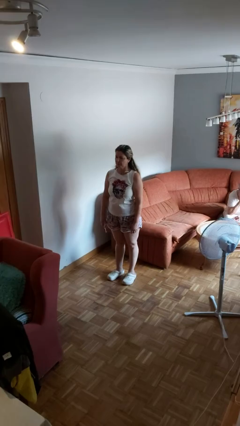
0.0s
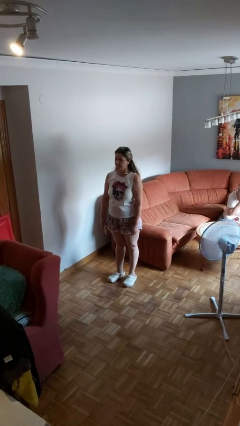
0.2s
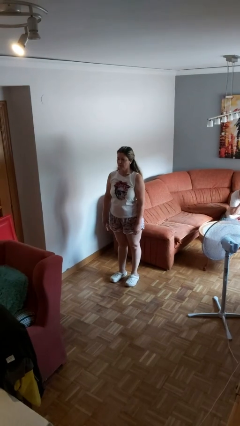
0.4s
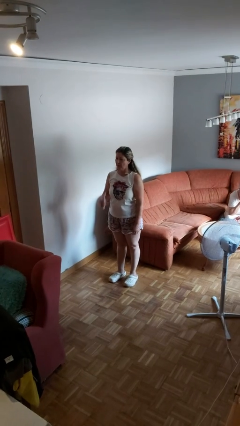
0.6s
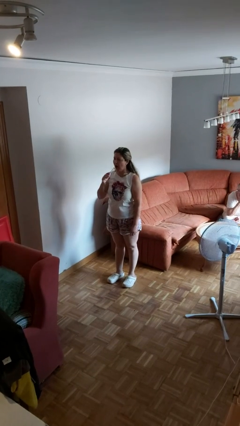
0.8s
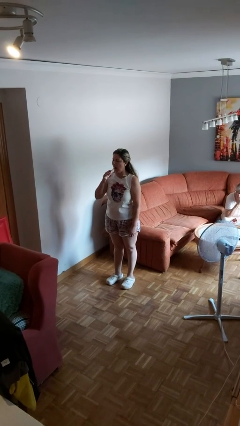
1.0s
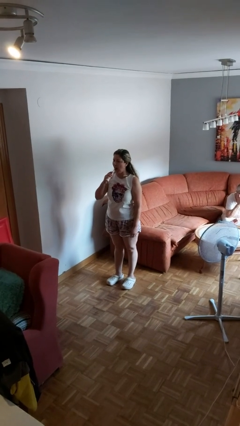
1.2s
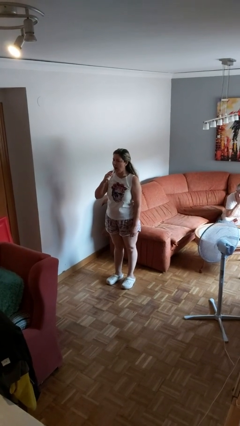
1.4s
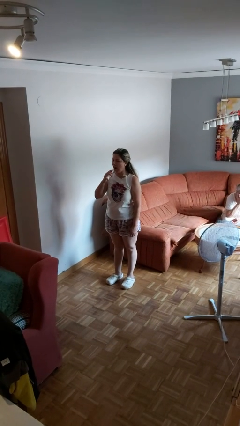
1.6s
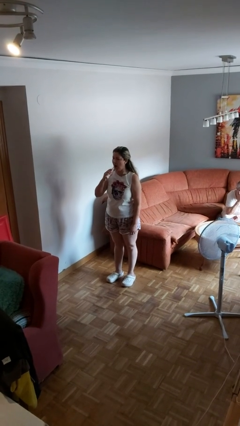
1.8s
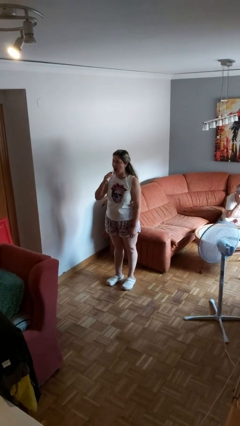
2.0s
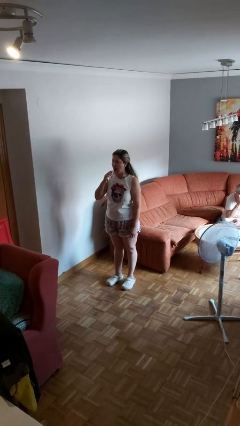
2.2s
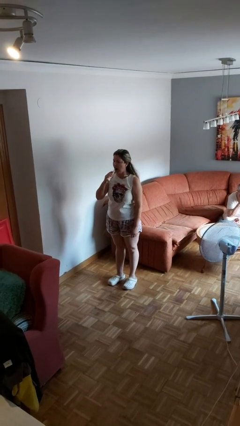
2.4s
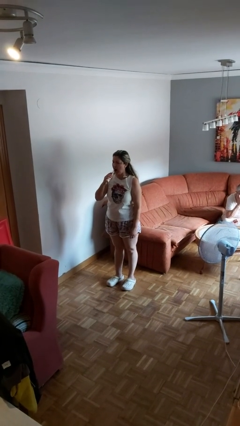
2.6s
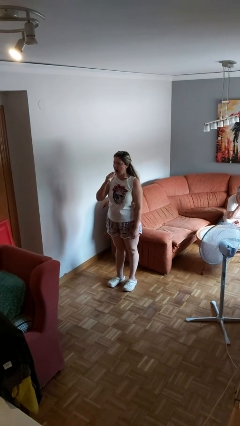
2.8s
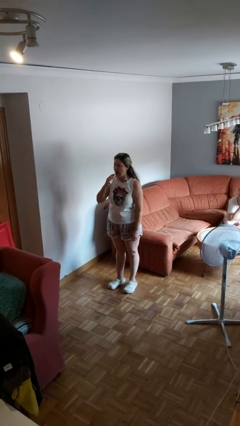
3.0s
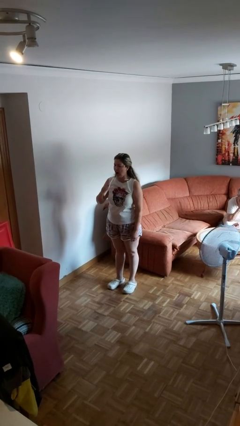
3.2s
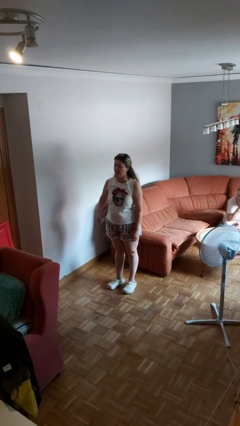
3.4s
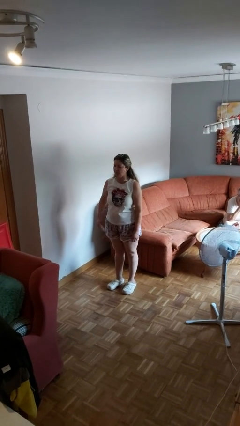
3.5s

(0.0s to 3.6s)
person brushes teeth

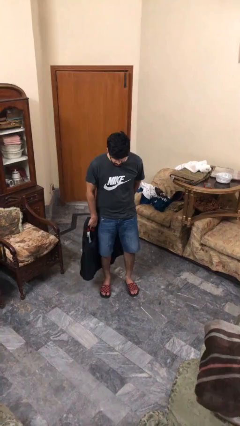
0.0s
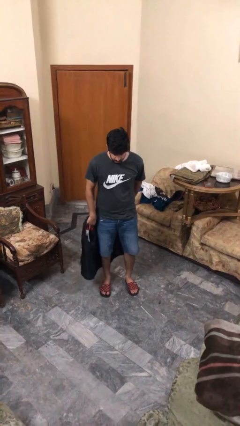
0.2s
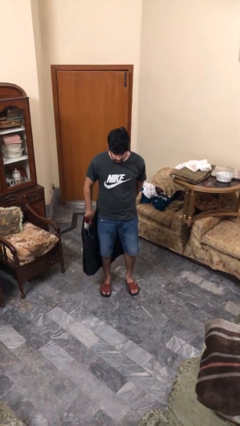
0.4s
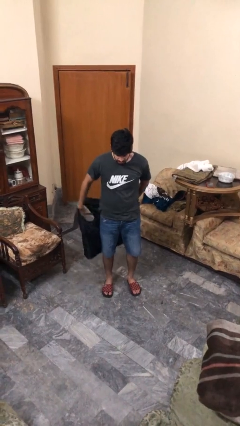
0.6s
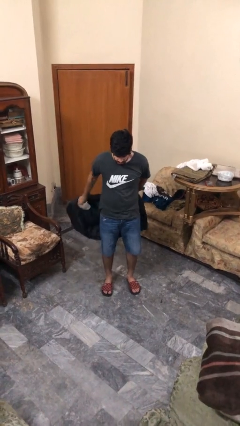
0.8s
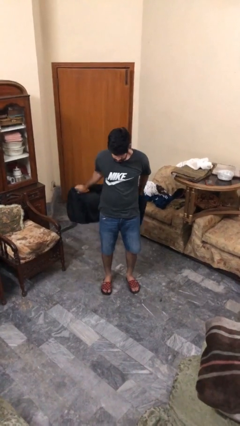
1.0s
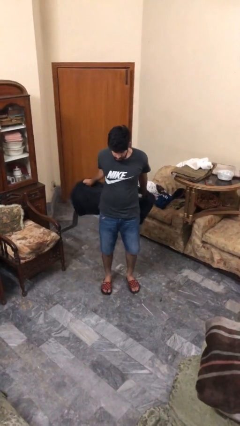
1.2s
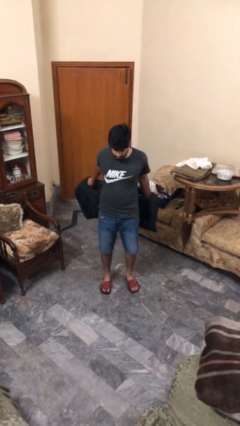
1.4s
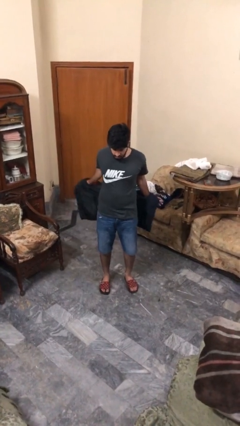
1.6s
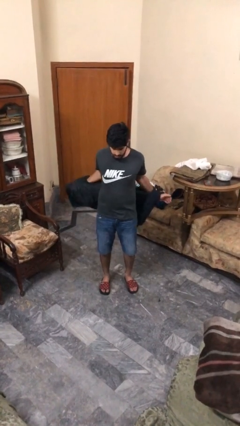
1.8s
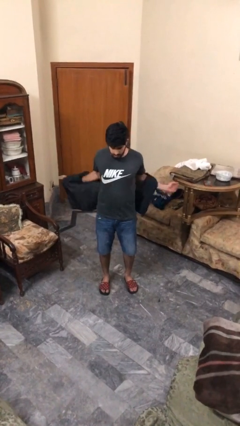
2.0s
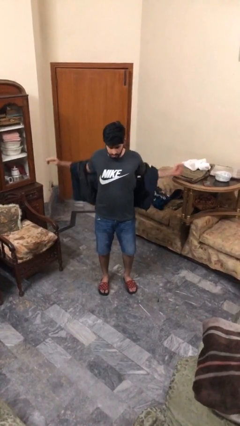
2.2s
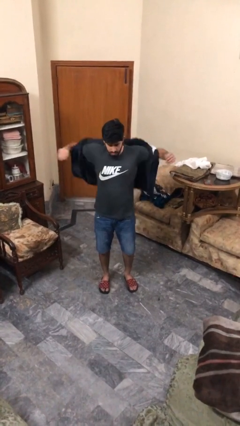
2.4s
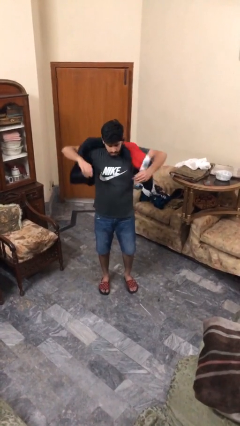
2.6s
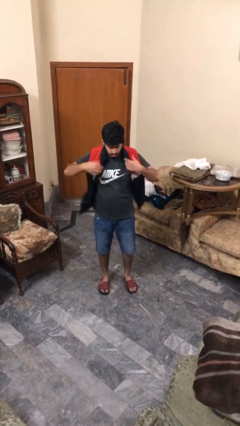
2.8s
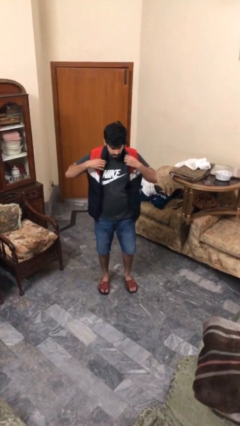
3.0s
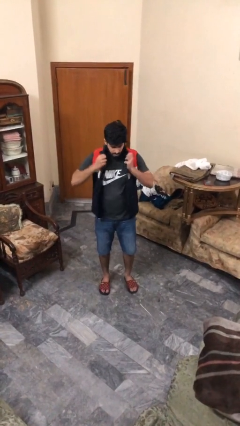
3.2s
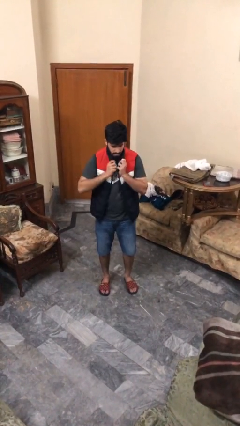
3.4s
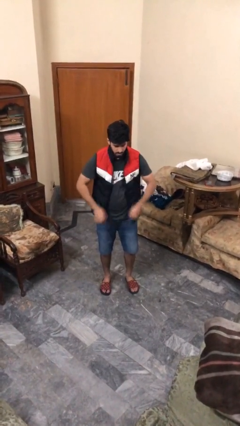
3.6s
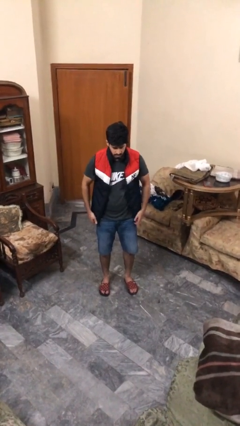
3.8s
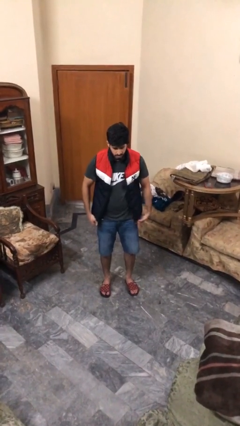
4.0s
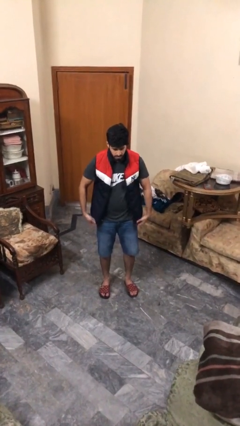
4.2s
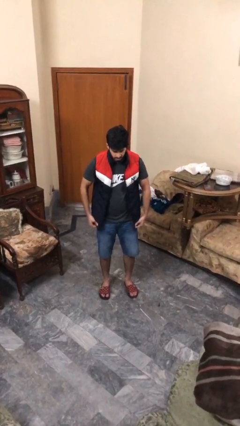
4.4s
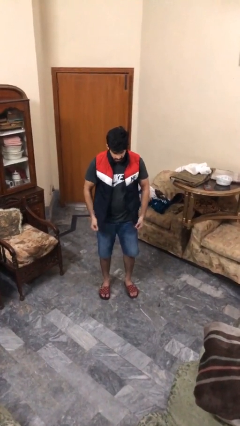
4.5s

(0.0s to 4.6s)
person puts on jacket

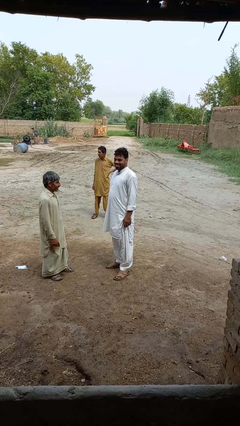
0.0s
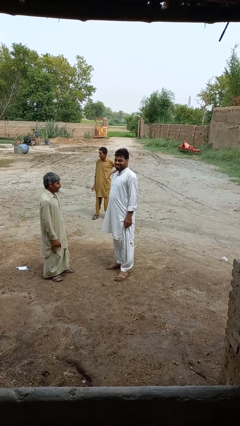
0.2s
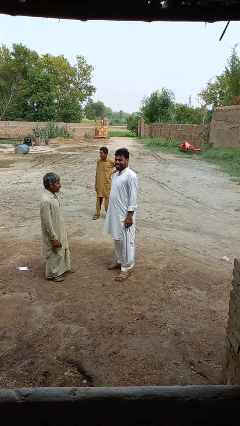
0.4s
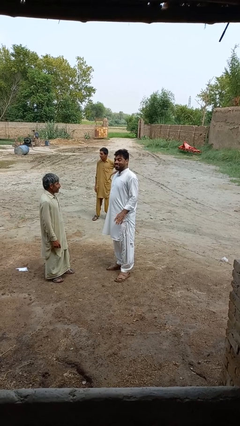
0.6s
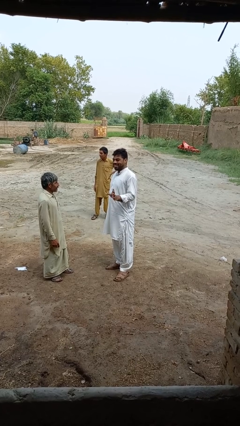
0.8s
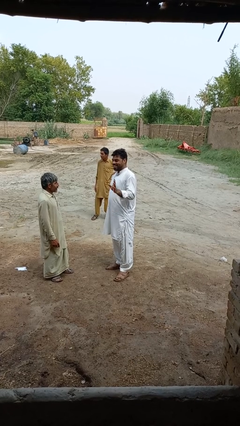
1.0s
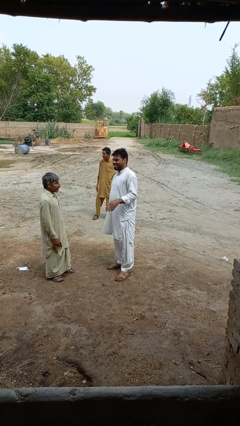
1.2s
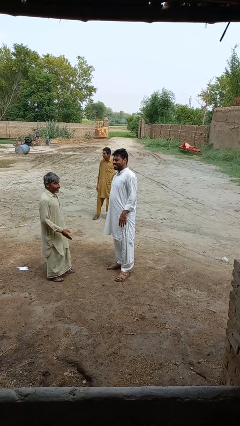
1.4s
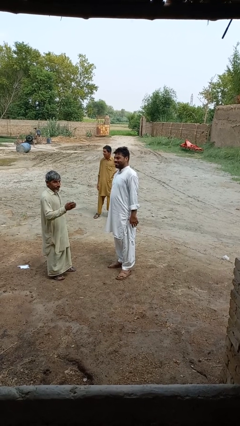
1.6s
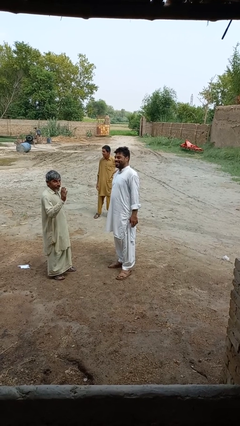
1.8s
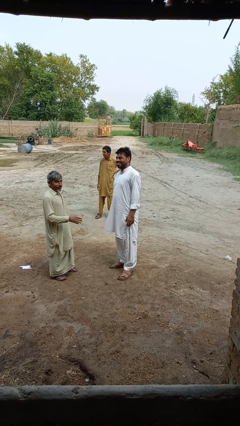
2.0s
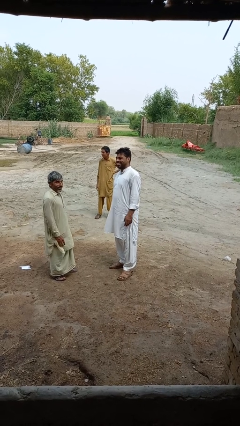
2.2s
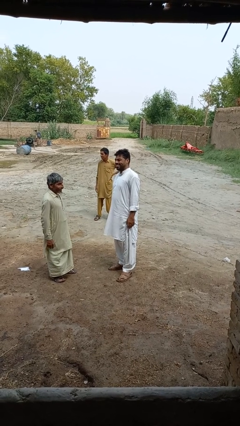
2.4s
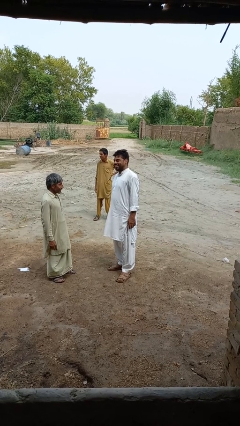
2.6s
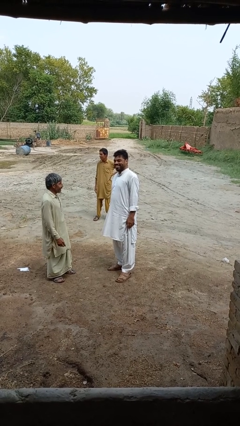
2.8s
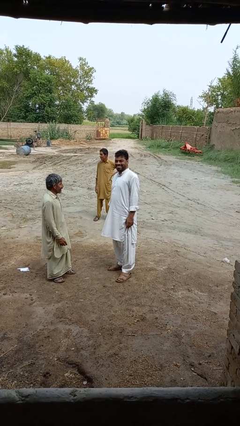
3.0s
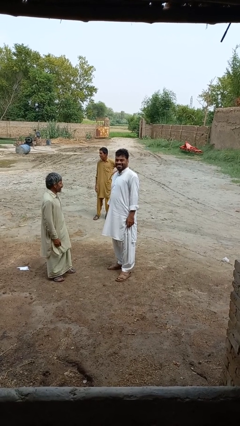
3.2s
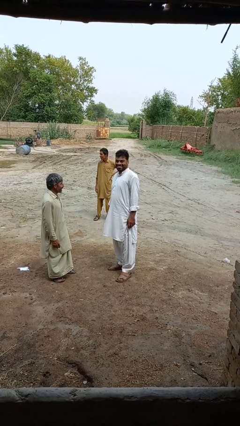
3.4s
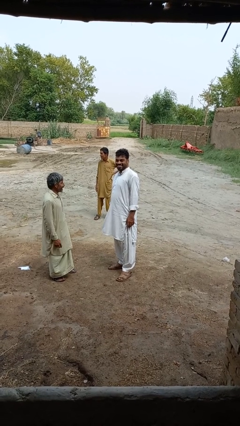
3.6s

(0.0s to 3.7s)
person laughs with person

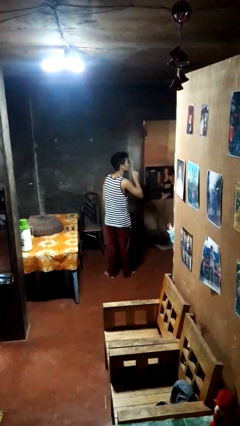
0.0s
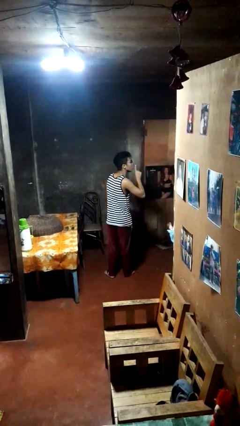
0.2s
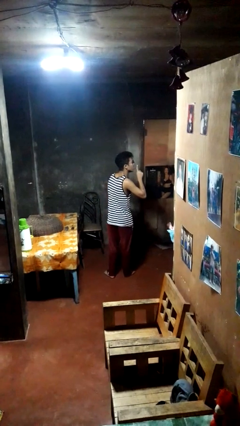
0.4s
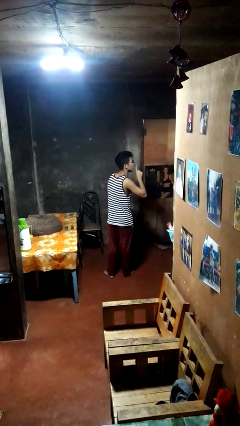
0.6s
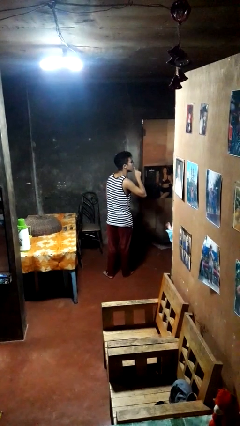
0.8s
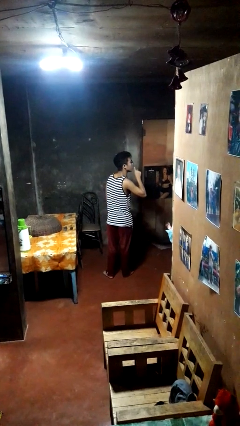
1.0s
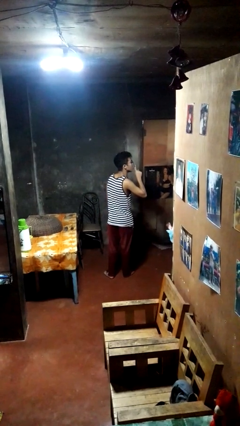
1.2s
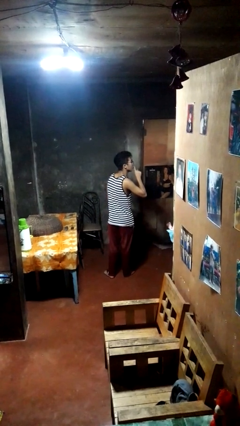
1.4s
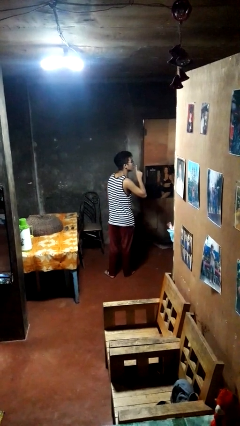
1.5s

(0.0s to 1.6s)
person gestures be quiet

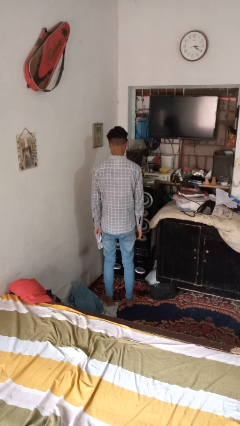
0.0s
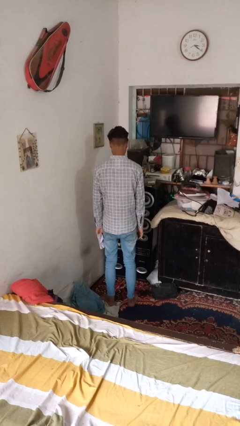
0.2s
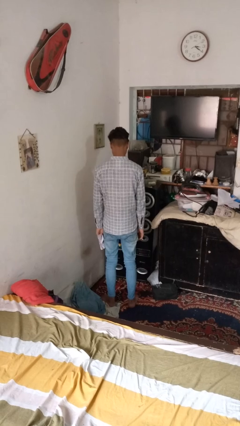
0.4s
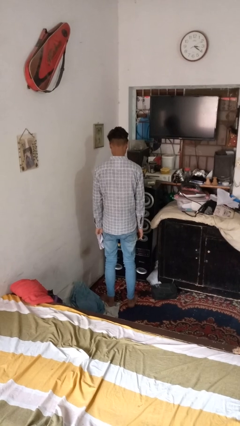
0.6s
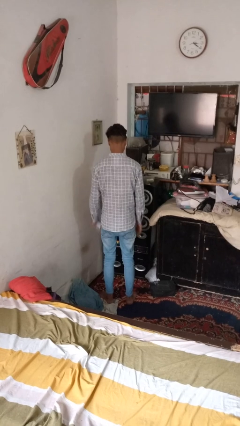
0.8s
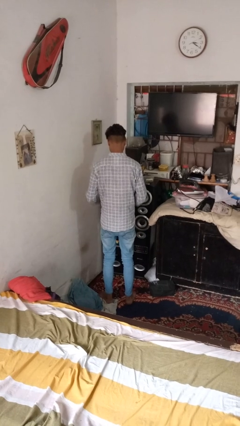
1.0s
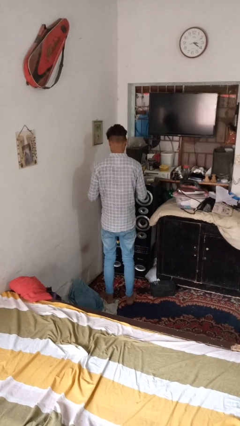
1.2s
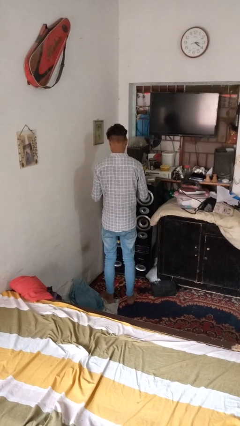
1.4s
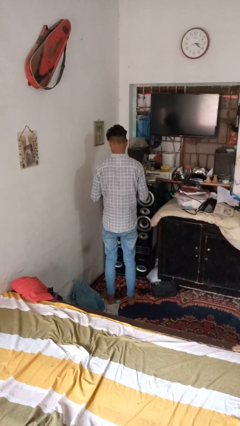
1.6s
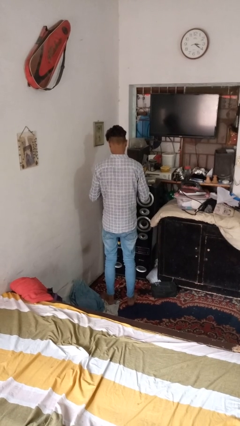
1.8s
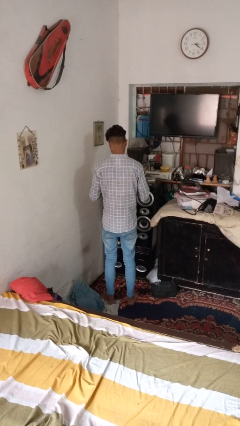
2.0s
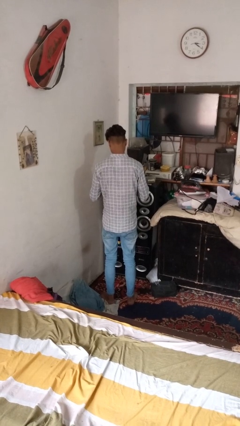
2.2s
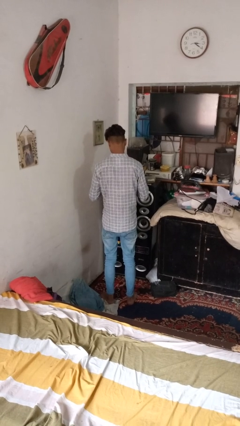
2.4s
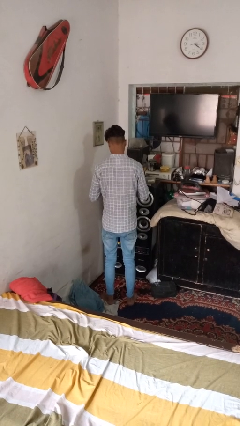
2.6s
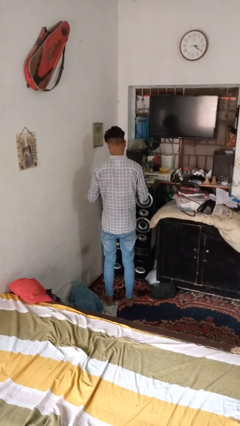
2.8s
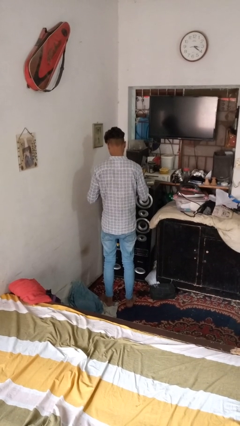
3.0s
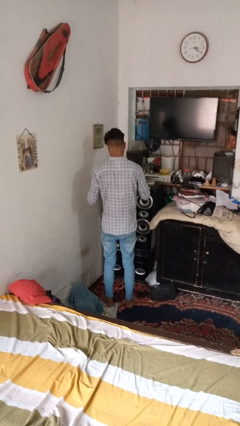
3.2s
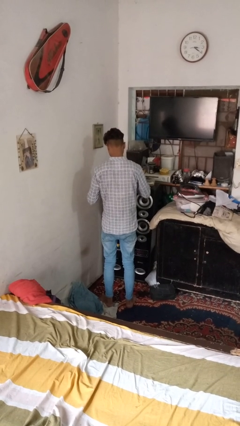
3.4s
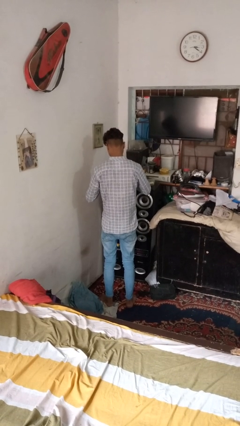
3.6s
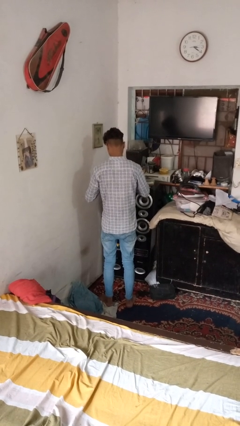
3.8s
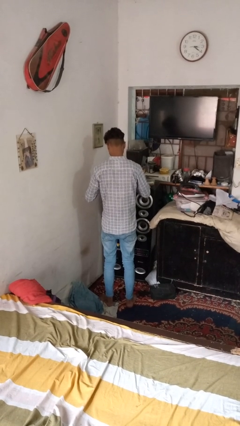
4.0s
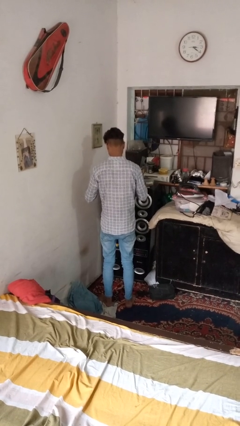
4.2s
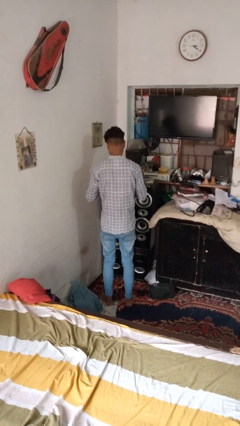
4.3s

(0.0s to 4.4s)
person tears paper

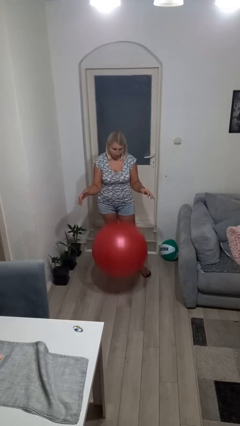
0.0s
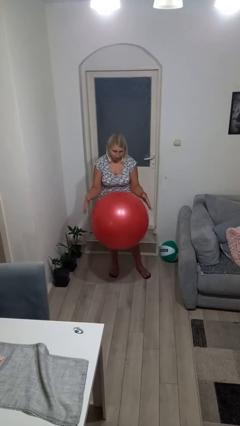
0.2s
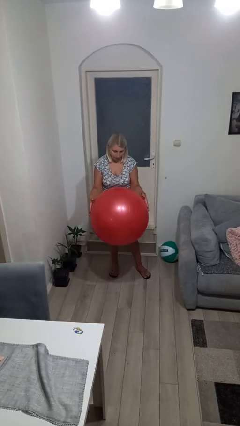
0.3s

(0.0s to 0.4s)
person bounces ball on floor
